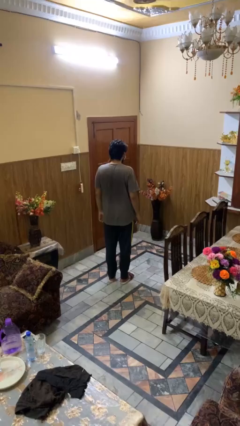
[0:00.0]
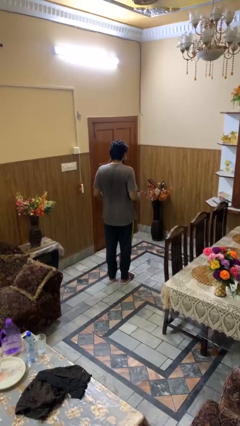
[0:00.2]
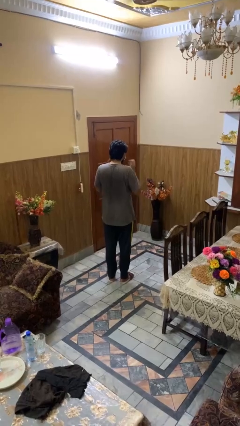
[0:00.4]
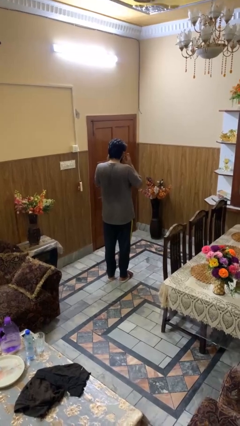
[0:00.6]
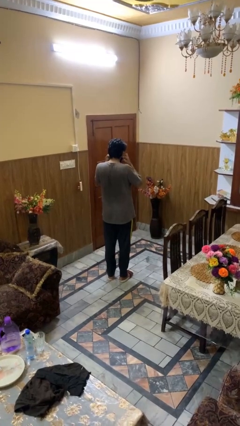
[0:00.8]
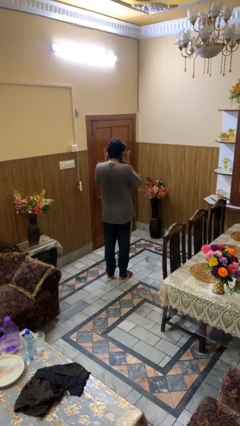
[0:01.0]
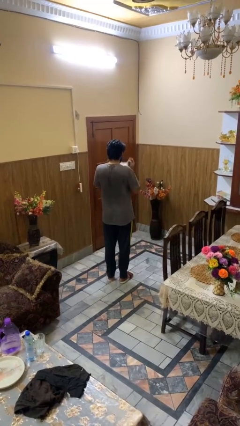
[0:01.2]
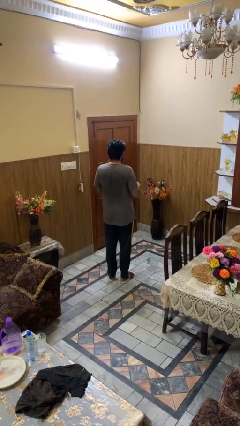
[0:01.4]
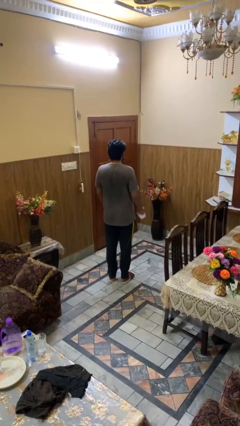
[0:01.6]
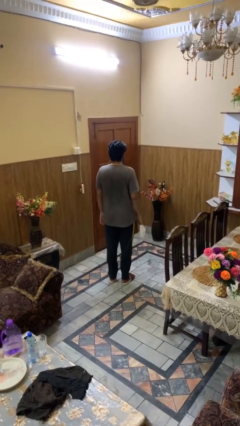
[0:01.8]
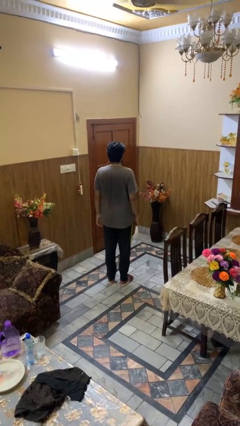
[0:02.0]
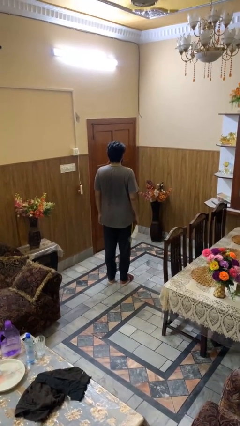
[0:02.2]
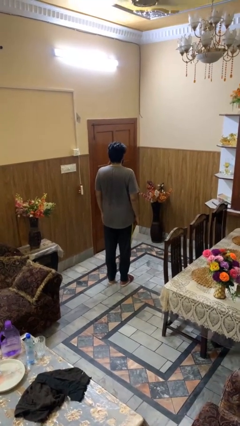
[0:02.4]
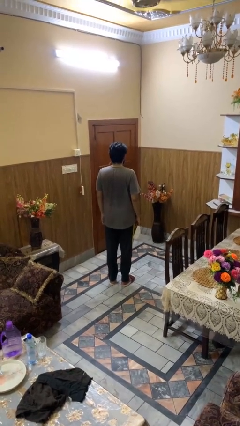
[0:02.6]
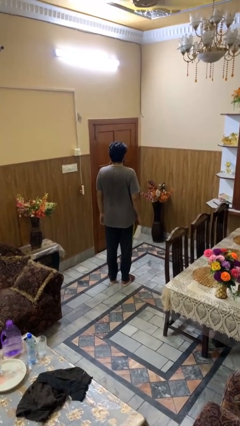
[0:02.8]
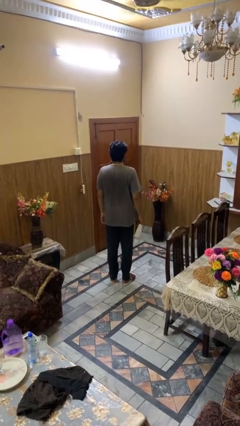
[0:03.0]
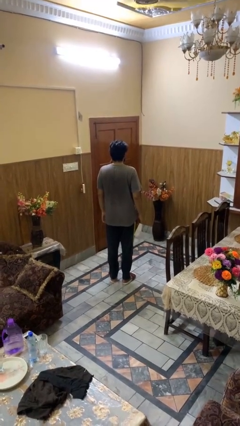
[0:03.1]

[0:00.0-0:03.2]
person takes off facemask

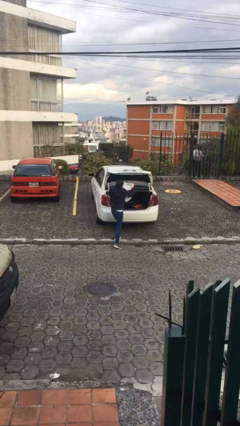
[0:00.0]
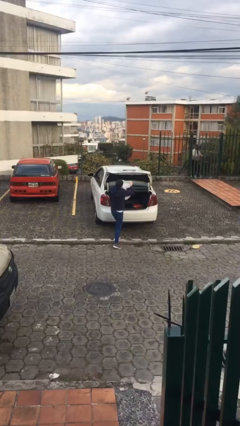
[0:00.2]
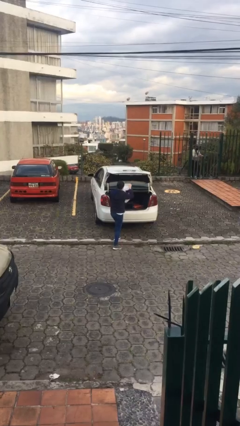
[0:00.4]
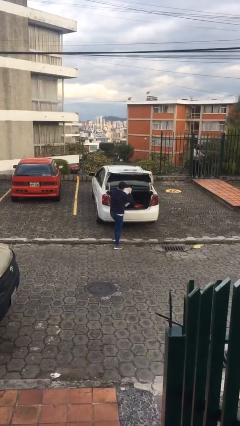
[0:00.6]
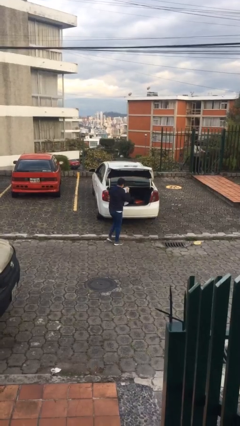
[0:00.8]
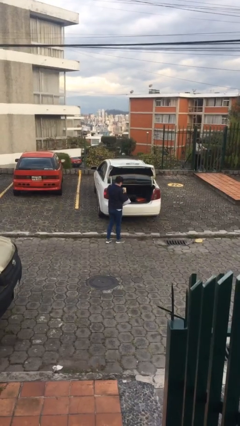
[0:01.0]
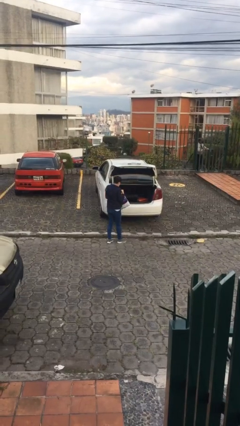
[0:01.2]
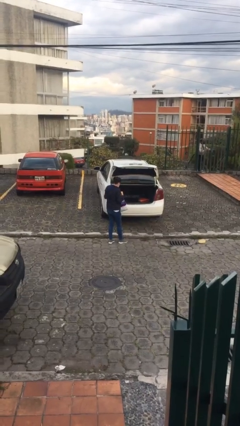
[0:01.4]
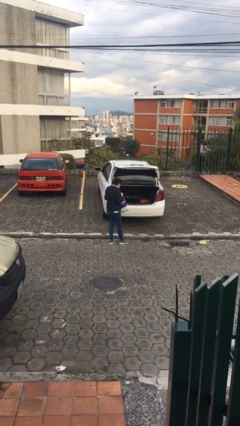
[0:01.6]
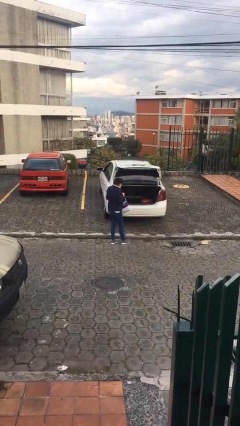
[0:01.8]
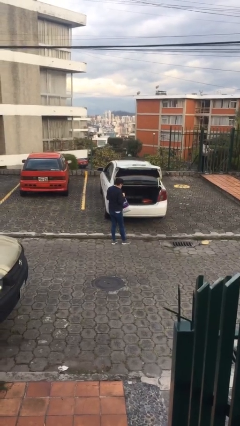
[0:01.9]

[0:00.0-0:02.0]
person unloads car

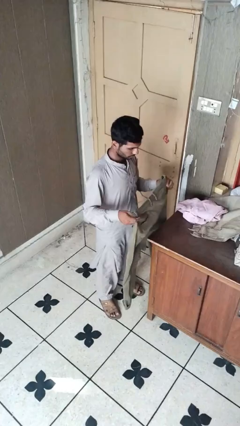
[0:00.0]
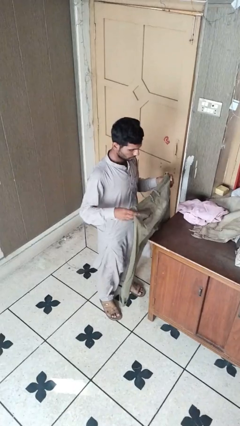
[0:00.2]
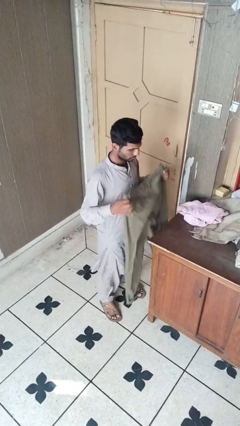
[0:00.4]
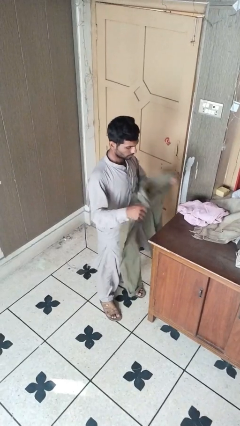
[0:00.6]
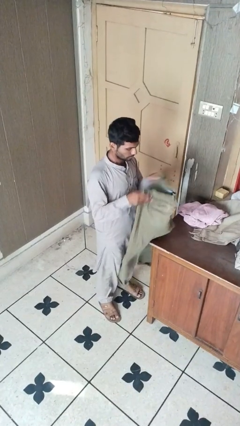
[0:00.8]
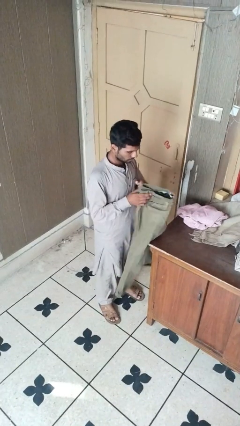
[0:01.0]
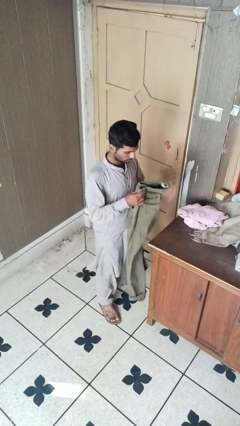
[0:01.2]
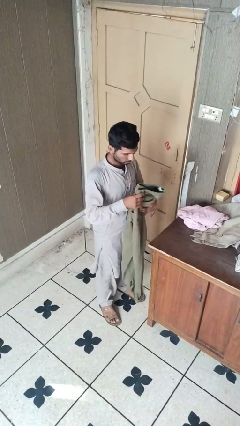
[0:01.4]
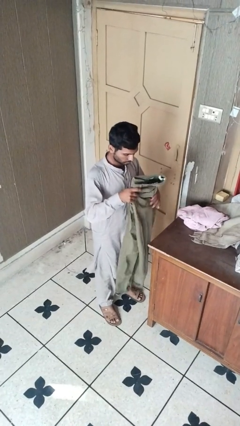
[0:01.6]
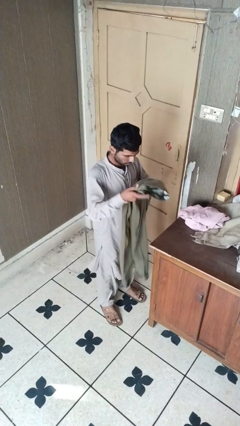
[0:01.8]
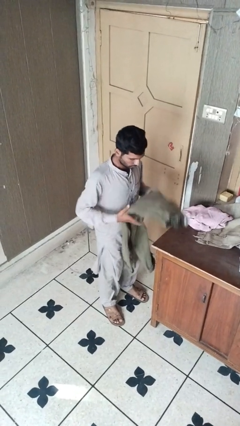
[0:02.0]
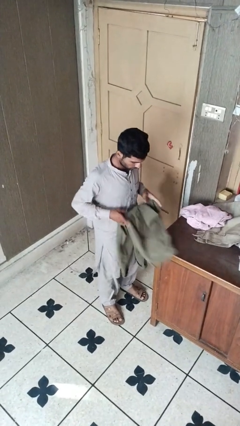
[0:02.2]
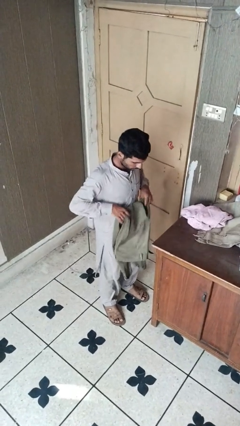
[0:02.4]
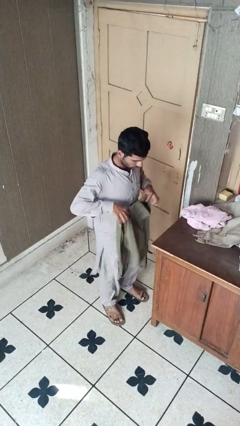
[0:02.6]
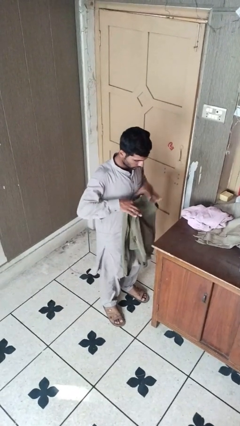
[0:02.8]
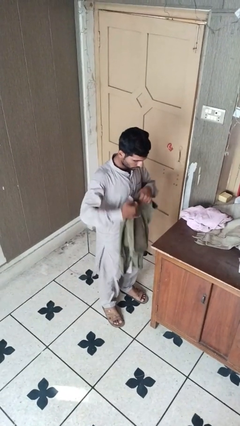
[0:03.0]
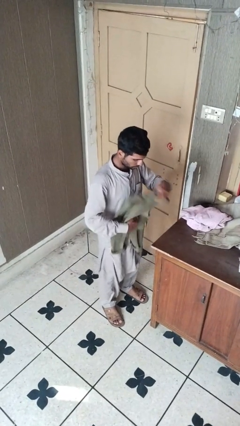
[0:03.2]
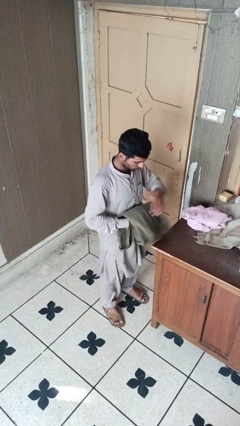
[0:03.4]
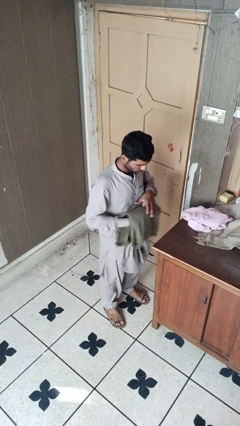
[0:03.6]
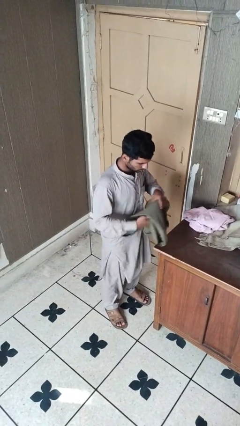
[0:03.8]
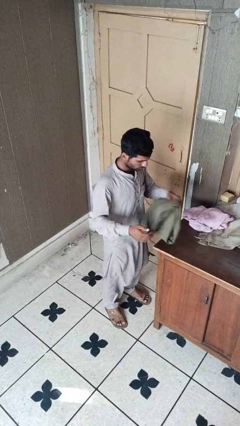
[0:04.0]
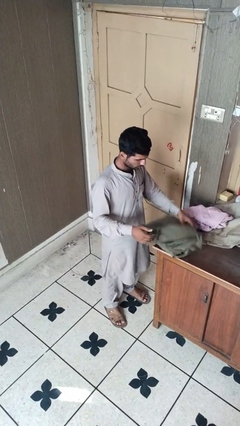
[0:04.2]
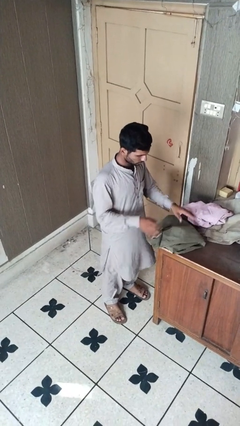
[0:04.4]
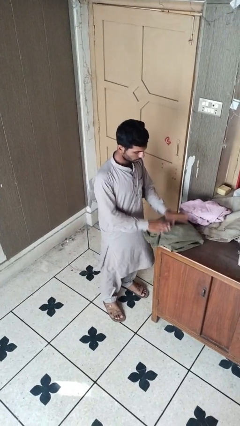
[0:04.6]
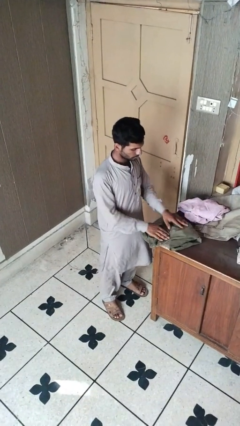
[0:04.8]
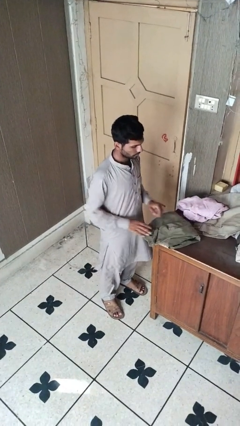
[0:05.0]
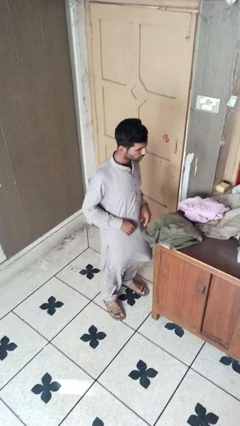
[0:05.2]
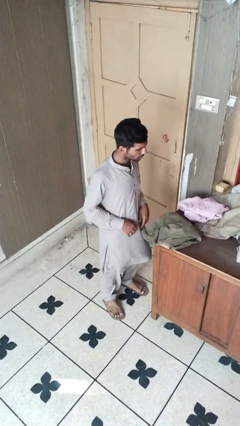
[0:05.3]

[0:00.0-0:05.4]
person folds pants

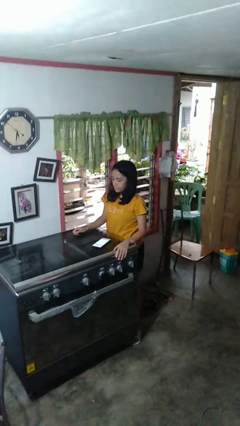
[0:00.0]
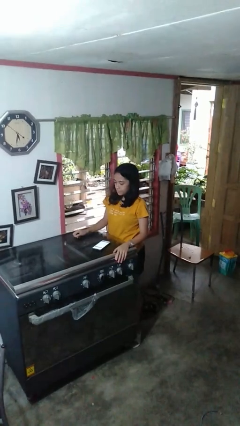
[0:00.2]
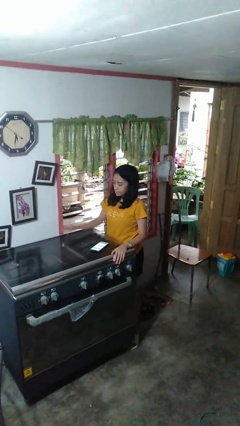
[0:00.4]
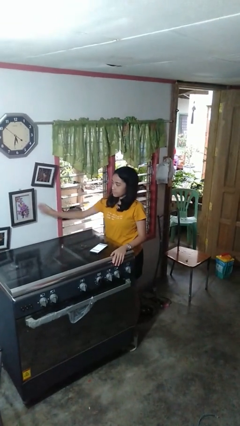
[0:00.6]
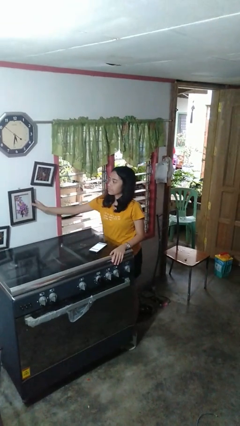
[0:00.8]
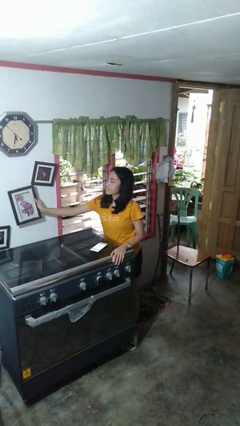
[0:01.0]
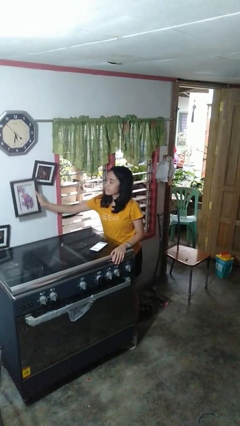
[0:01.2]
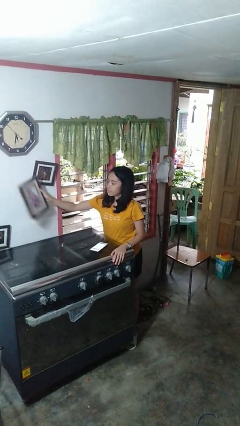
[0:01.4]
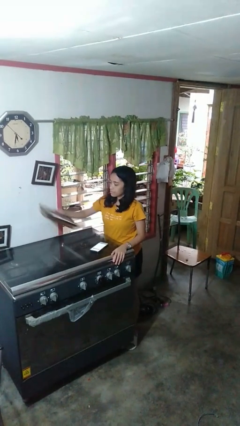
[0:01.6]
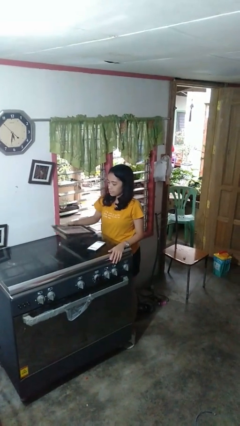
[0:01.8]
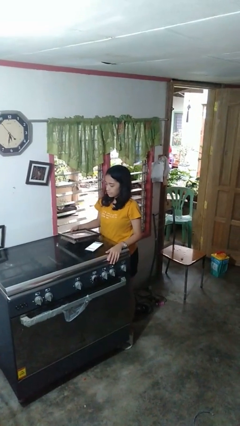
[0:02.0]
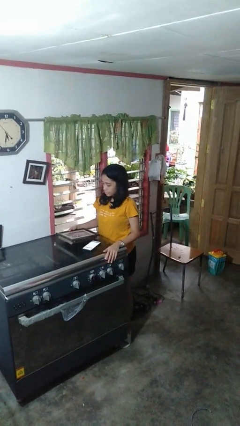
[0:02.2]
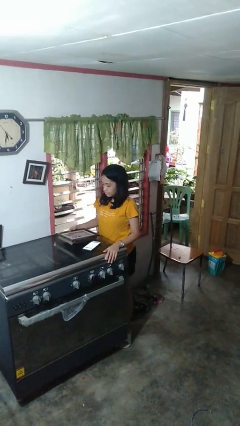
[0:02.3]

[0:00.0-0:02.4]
person takes down picture frame

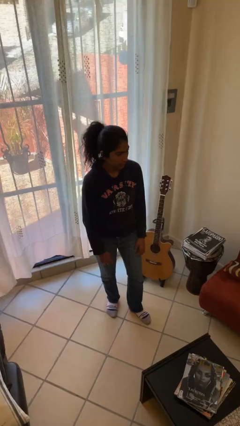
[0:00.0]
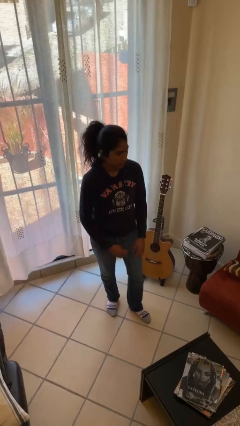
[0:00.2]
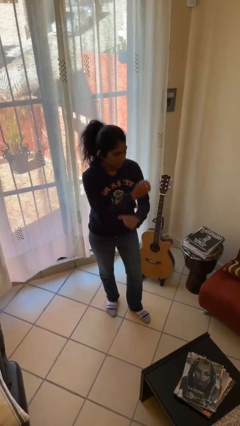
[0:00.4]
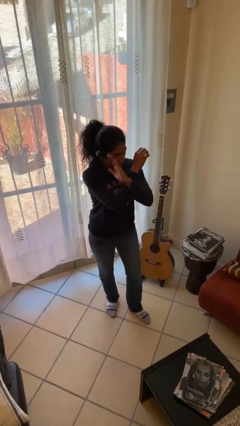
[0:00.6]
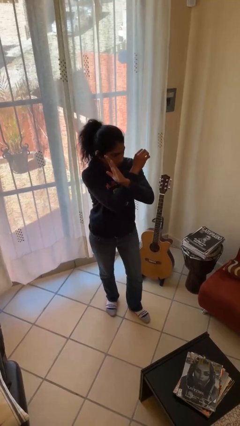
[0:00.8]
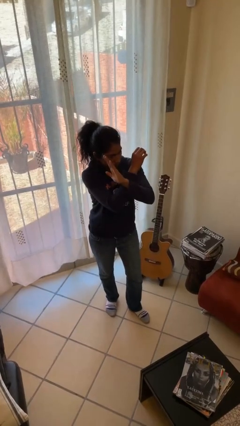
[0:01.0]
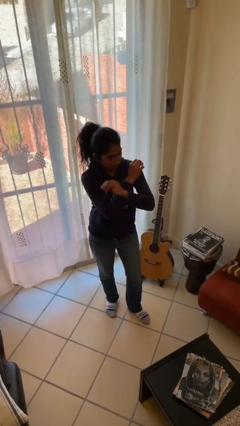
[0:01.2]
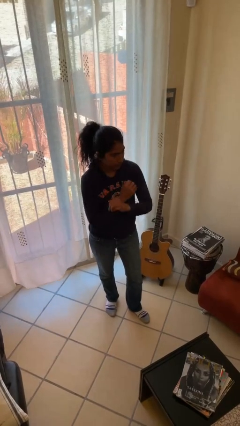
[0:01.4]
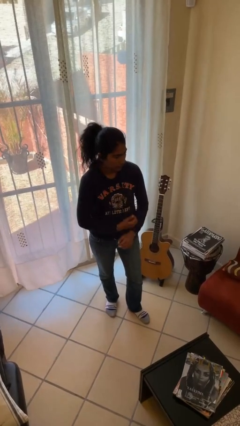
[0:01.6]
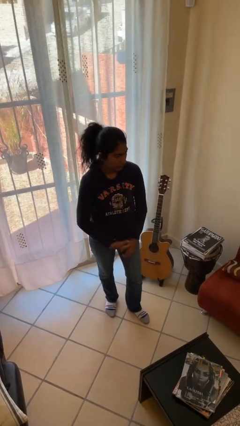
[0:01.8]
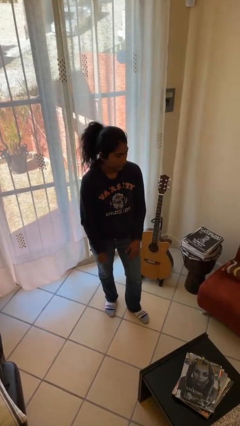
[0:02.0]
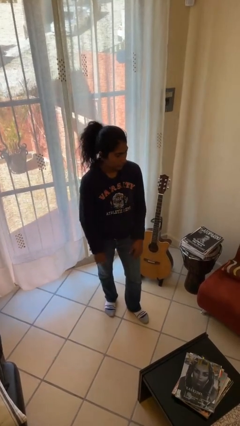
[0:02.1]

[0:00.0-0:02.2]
person gestures arms x

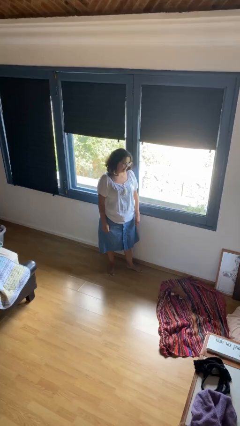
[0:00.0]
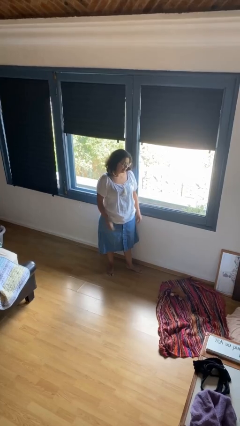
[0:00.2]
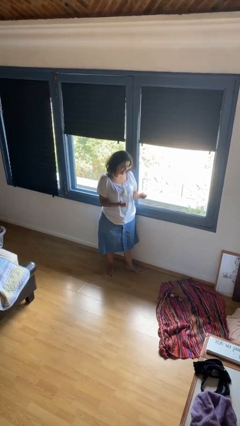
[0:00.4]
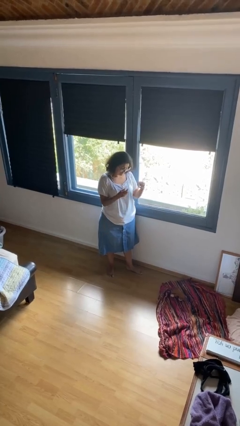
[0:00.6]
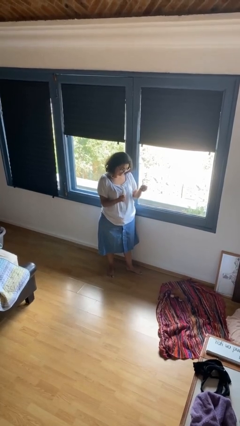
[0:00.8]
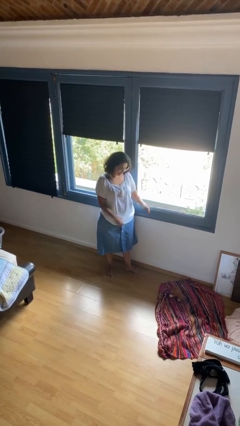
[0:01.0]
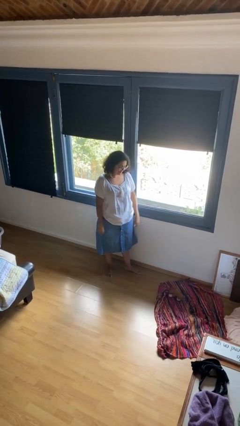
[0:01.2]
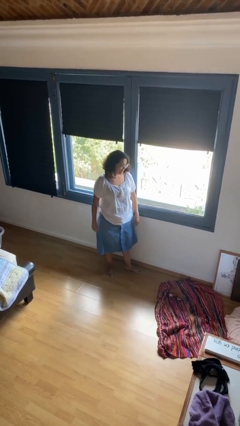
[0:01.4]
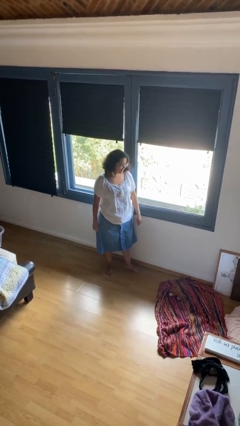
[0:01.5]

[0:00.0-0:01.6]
person snaps fingers

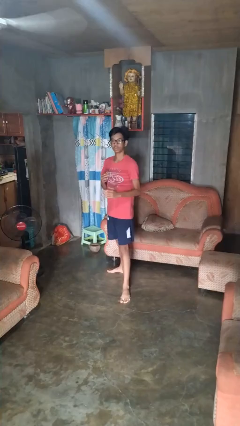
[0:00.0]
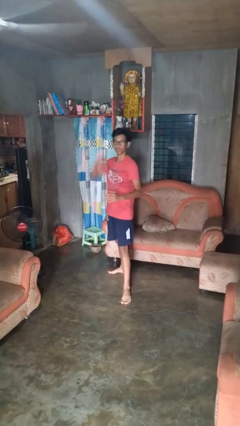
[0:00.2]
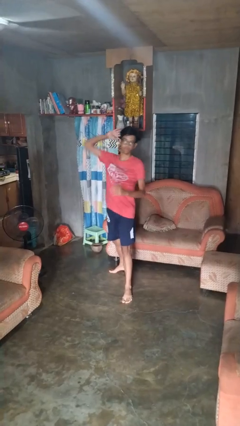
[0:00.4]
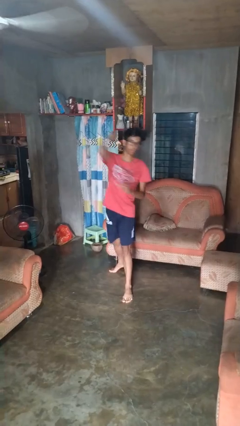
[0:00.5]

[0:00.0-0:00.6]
person karate chop
